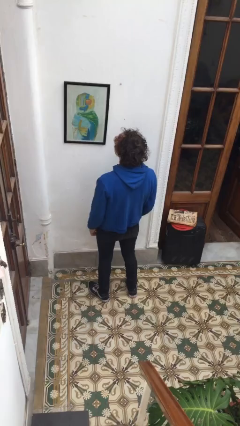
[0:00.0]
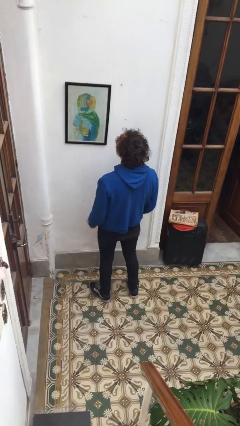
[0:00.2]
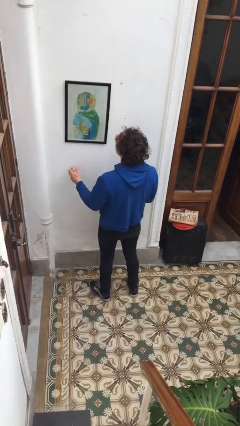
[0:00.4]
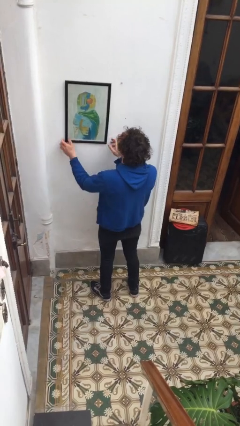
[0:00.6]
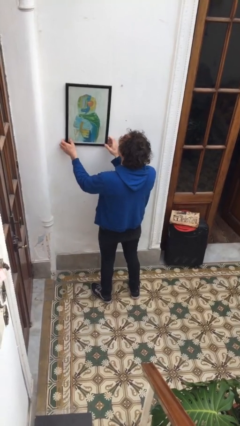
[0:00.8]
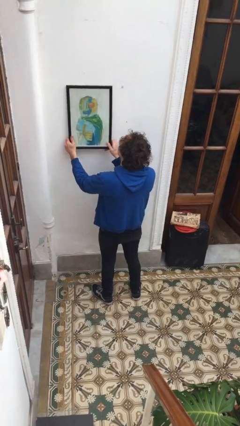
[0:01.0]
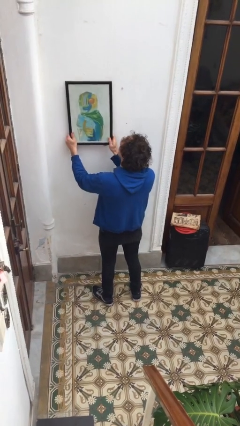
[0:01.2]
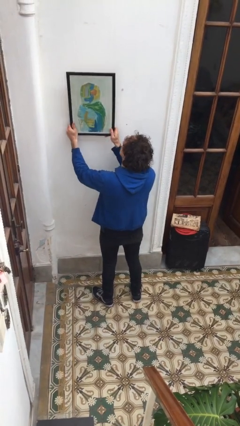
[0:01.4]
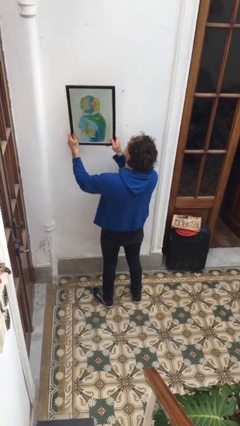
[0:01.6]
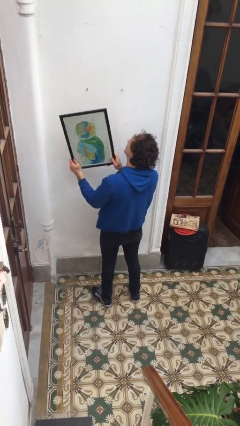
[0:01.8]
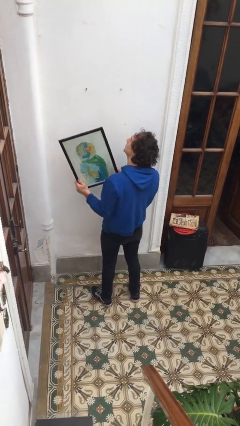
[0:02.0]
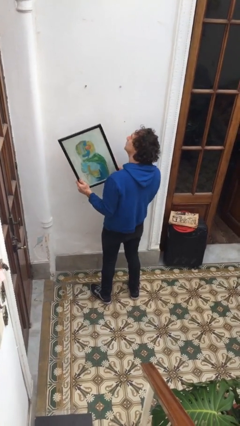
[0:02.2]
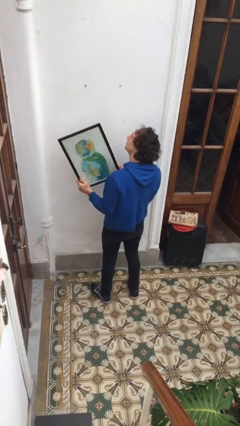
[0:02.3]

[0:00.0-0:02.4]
person takes down picture frame

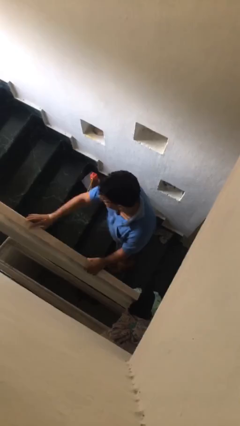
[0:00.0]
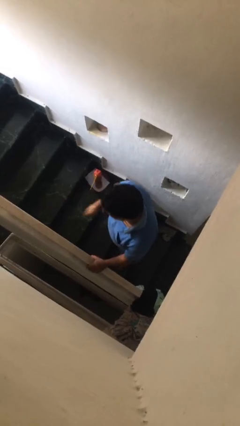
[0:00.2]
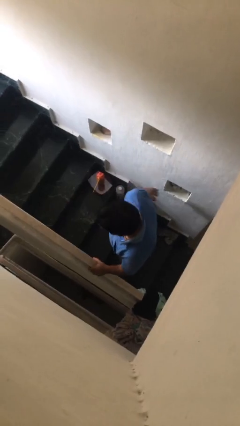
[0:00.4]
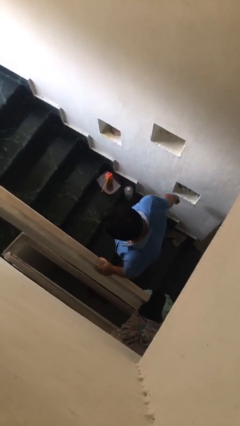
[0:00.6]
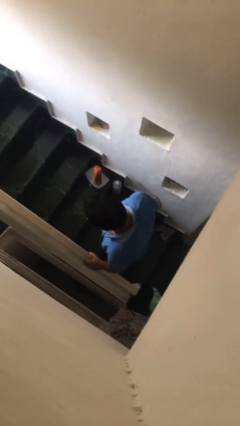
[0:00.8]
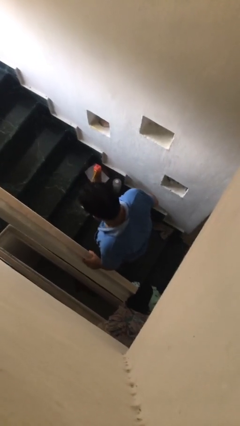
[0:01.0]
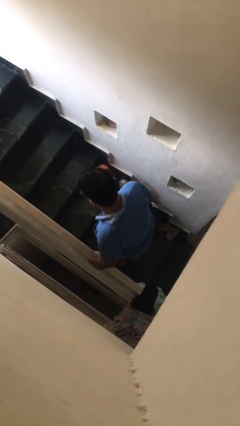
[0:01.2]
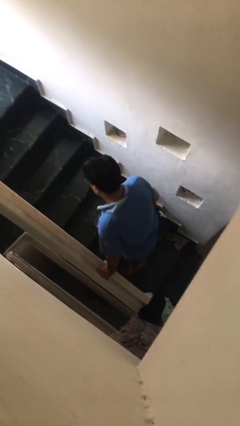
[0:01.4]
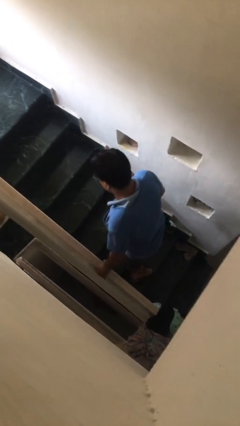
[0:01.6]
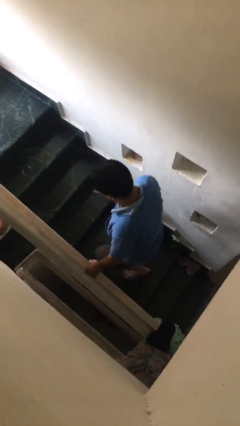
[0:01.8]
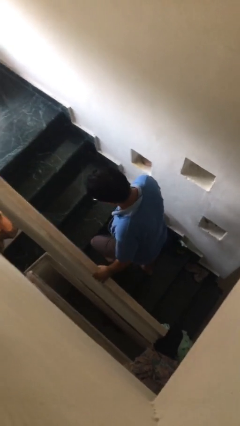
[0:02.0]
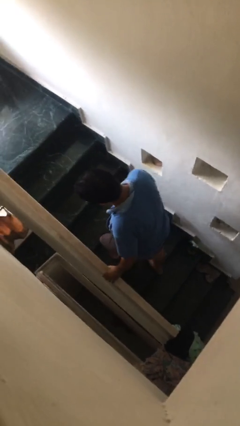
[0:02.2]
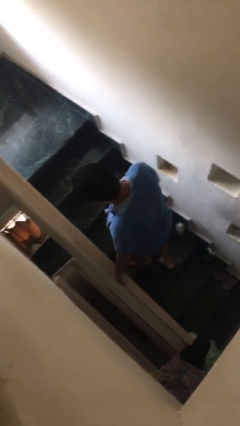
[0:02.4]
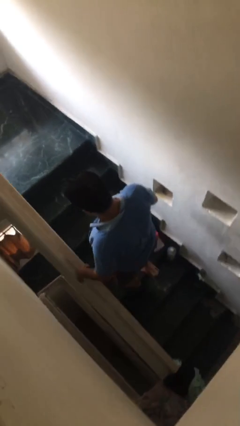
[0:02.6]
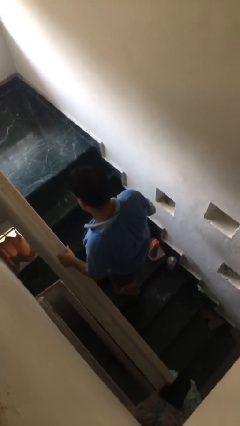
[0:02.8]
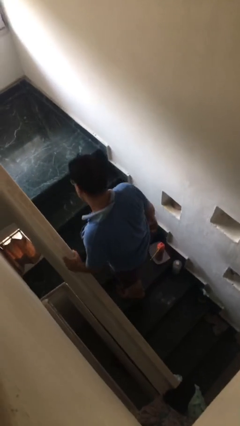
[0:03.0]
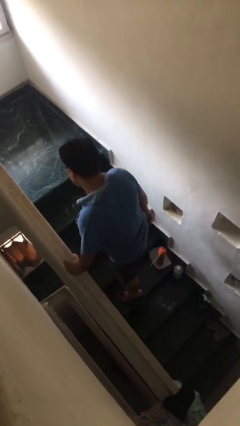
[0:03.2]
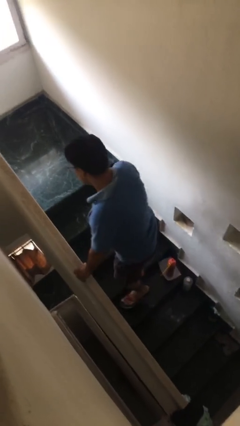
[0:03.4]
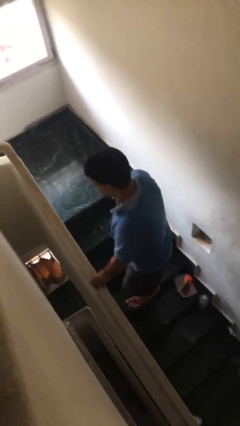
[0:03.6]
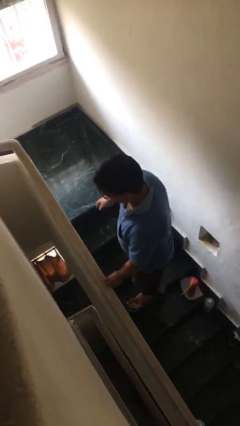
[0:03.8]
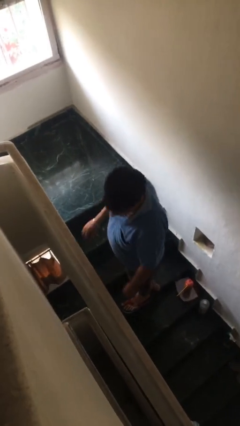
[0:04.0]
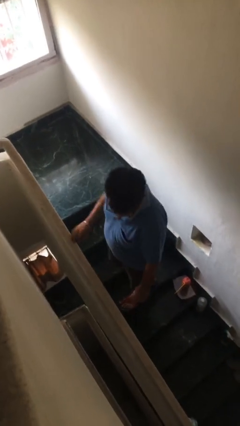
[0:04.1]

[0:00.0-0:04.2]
person climbs up stairs

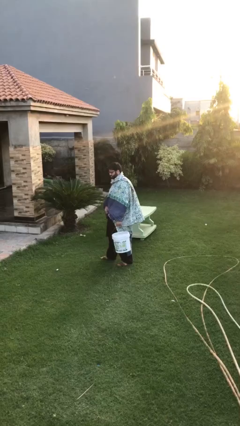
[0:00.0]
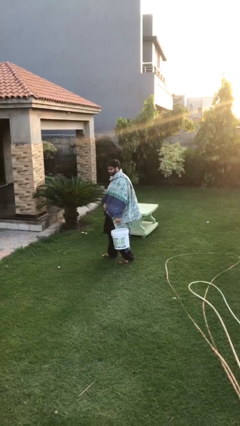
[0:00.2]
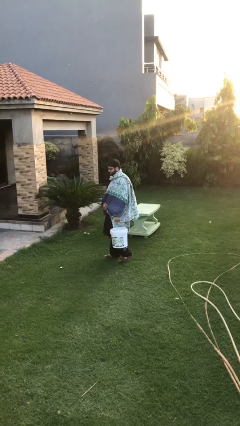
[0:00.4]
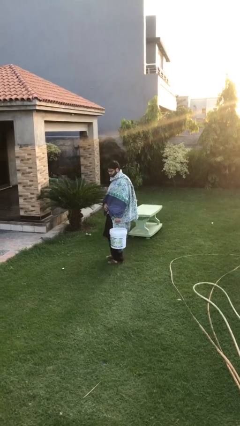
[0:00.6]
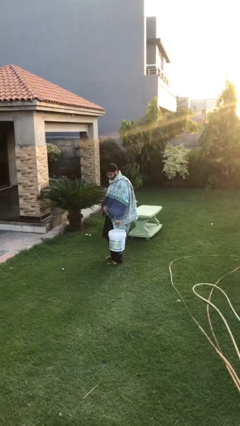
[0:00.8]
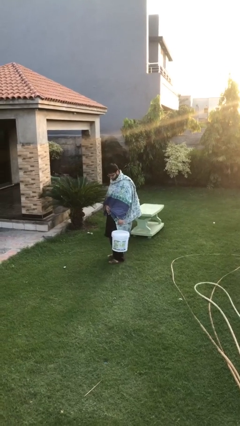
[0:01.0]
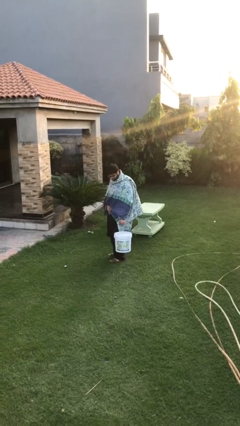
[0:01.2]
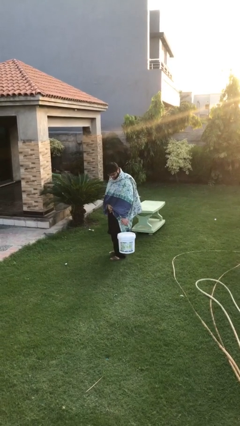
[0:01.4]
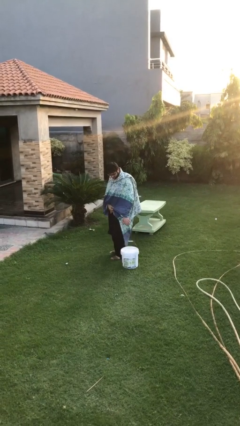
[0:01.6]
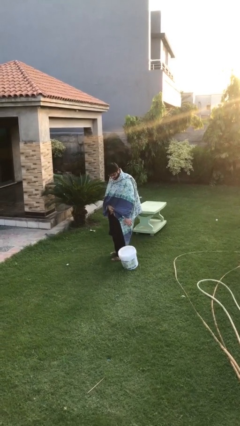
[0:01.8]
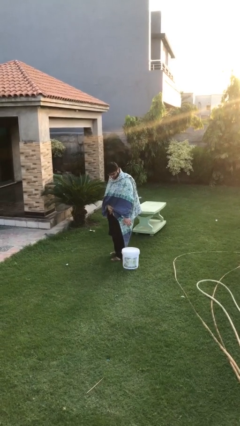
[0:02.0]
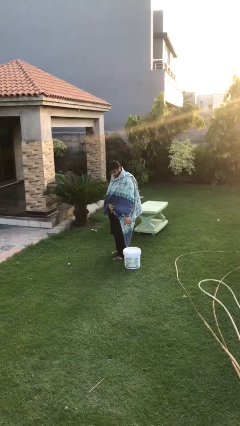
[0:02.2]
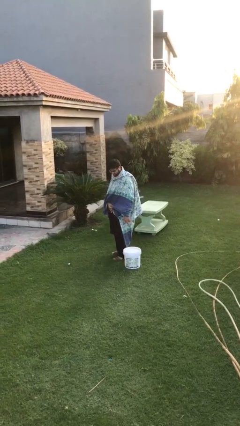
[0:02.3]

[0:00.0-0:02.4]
person puts down object on floor

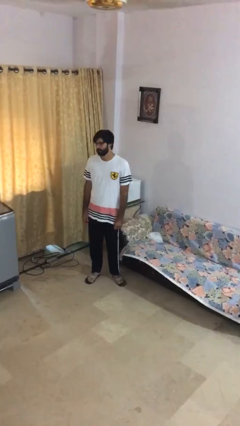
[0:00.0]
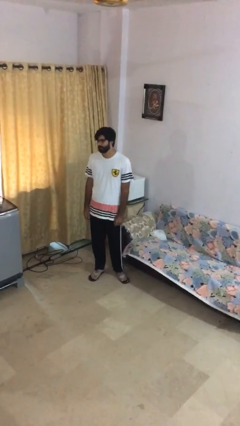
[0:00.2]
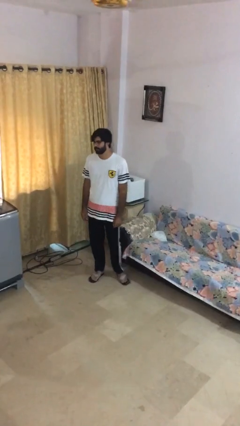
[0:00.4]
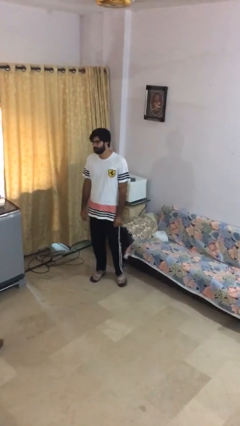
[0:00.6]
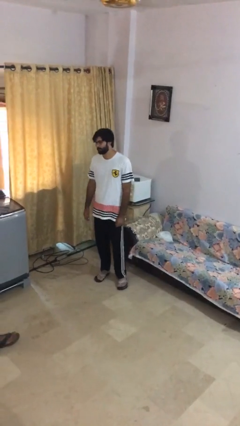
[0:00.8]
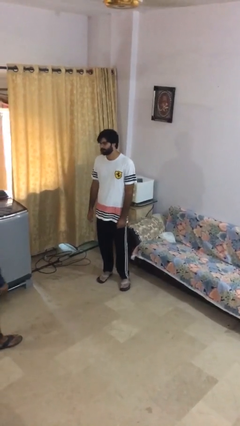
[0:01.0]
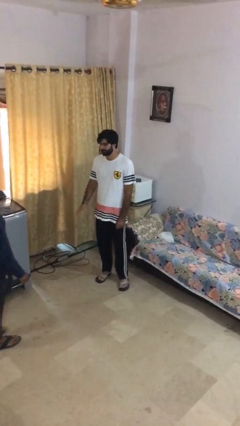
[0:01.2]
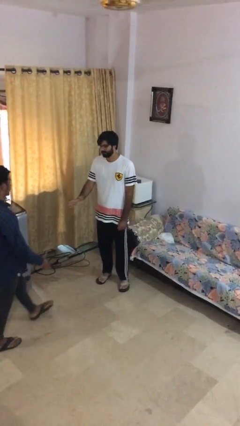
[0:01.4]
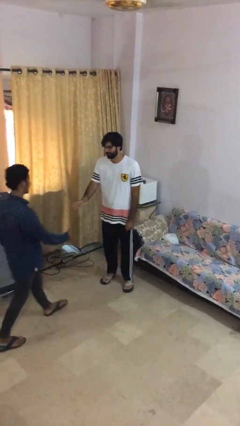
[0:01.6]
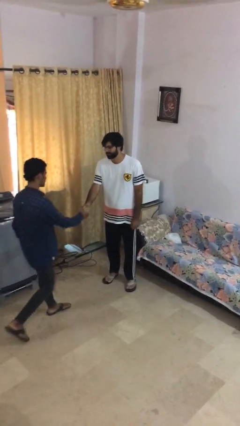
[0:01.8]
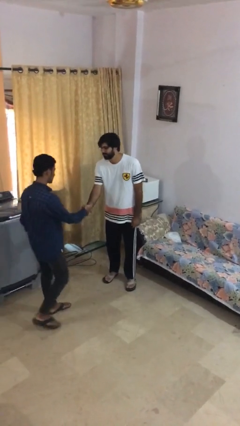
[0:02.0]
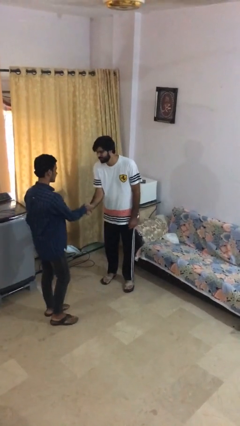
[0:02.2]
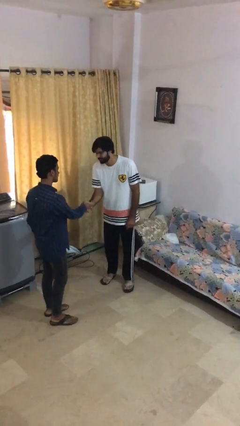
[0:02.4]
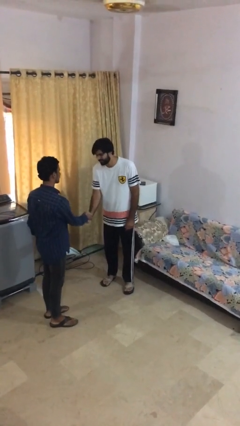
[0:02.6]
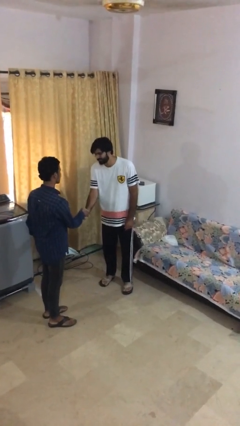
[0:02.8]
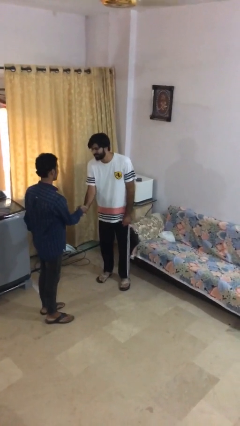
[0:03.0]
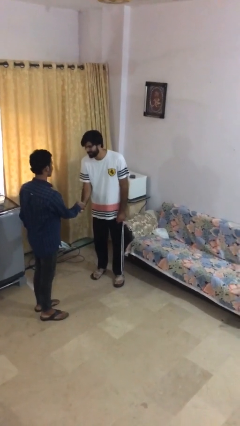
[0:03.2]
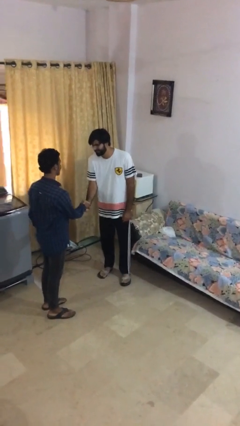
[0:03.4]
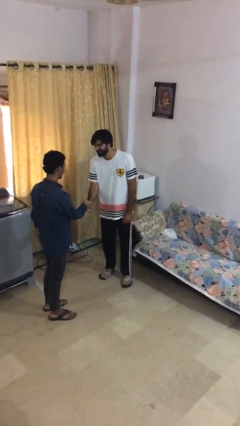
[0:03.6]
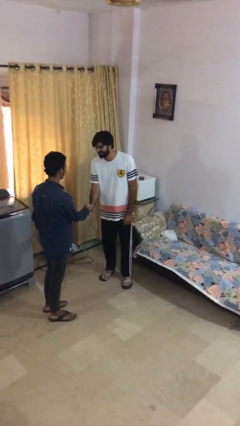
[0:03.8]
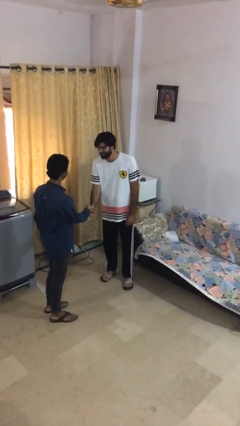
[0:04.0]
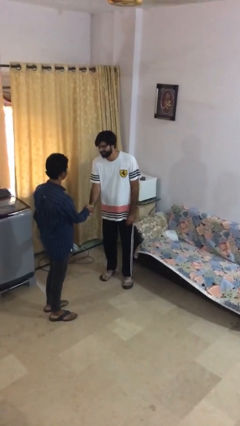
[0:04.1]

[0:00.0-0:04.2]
person shakes hand

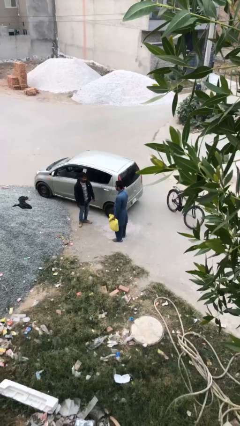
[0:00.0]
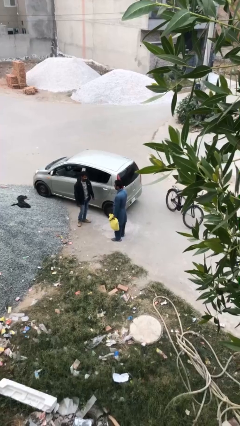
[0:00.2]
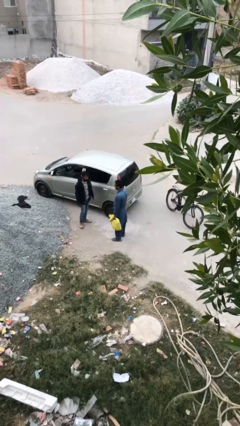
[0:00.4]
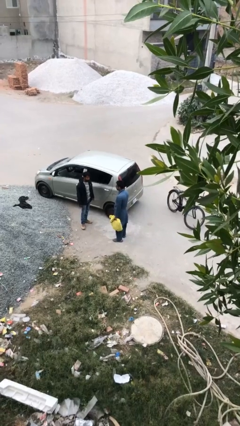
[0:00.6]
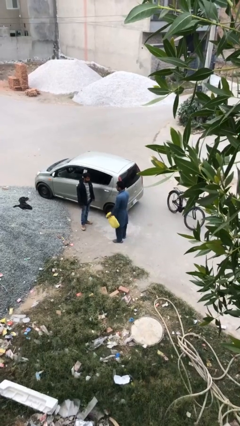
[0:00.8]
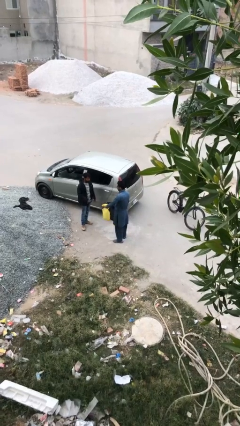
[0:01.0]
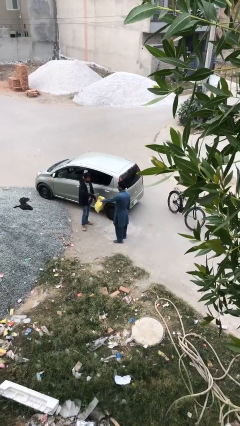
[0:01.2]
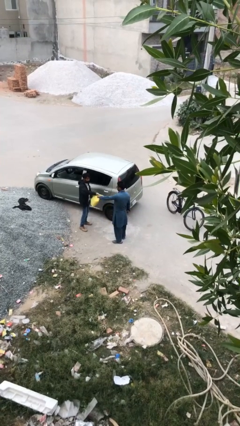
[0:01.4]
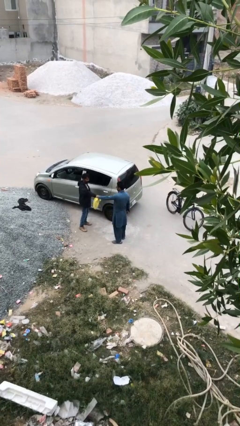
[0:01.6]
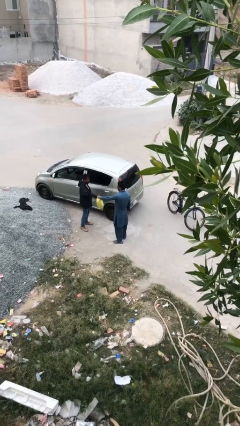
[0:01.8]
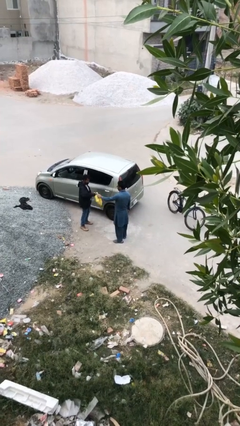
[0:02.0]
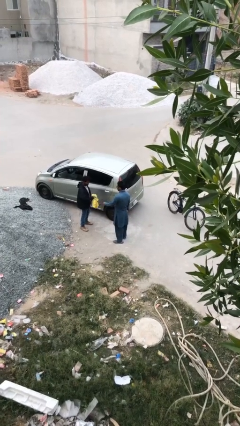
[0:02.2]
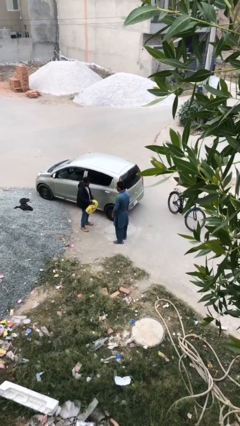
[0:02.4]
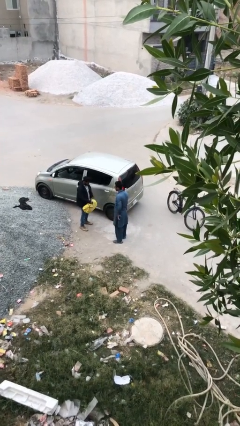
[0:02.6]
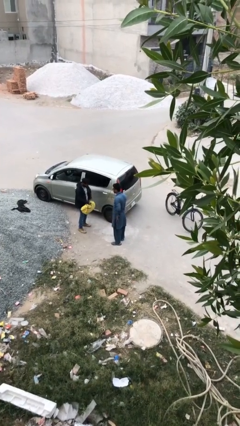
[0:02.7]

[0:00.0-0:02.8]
person transfers object to person

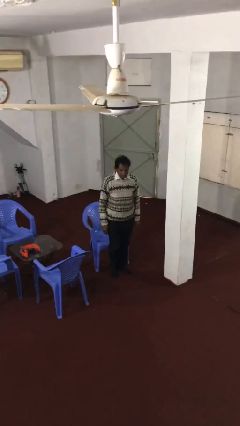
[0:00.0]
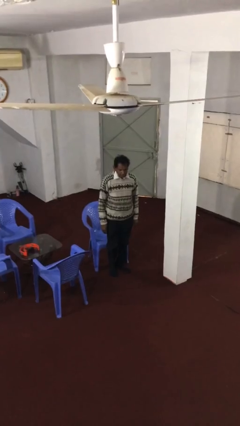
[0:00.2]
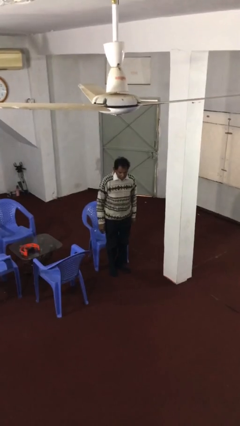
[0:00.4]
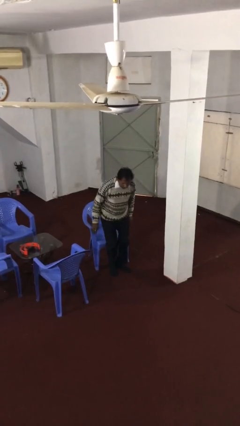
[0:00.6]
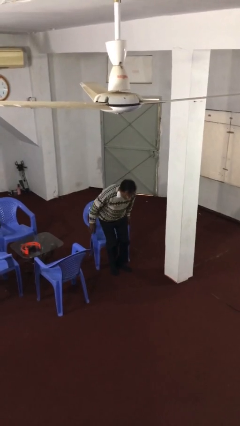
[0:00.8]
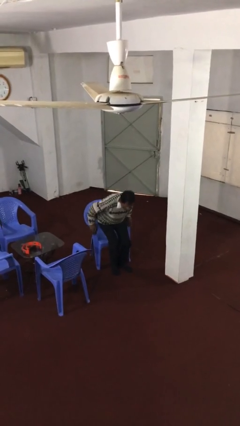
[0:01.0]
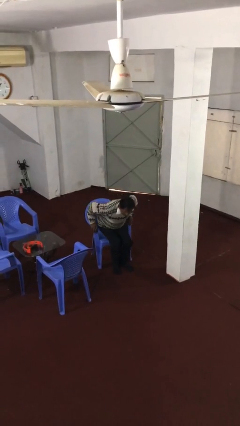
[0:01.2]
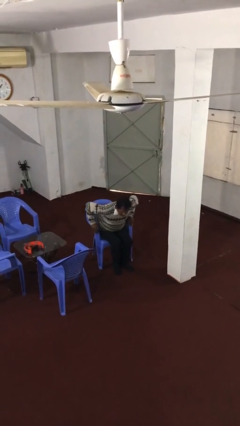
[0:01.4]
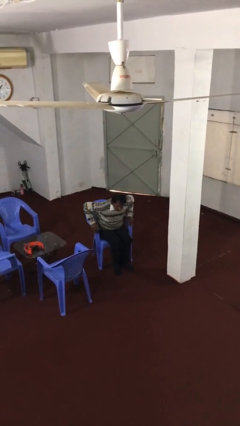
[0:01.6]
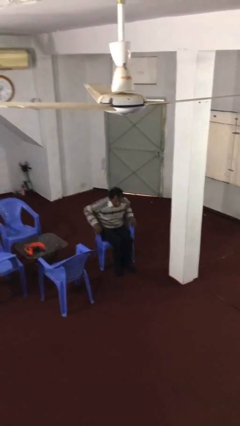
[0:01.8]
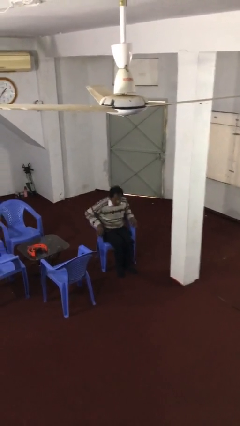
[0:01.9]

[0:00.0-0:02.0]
person sits down
